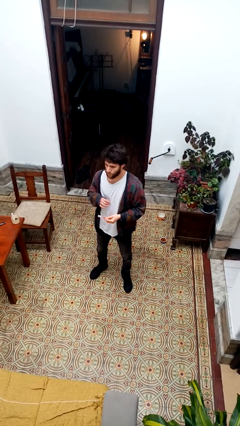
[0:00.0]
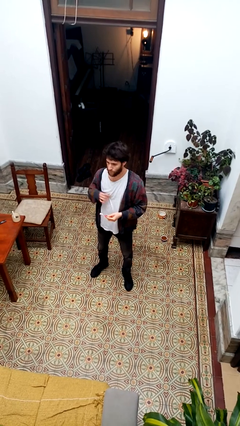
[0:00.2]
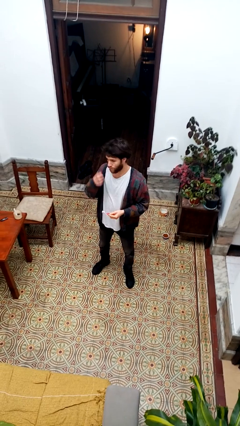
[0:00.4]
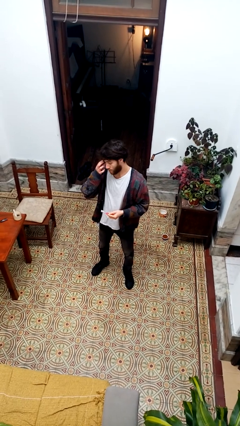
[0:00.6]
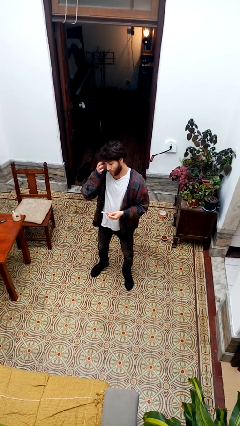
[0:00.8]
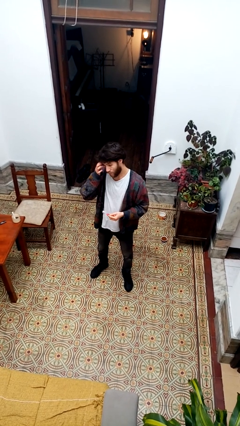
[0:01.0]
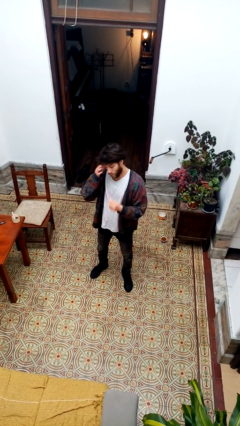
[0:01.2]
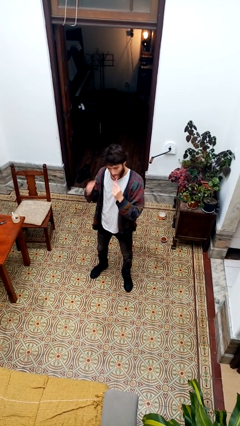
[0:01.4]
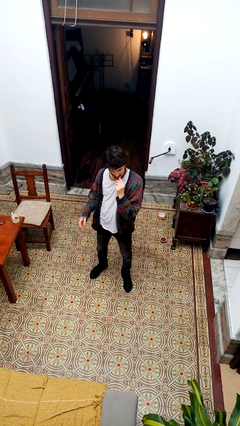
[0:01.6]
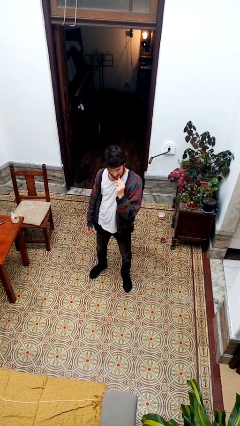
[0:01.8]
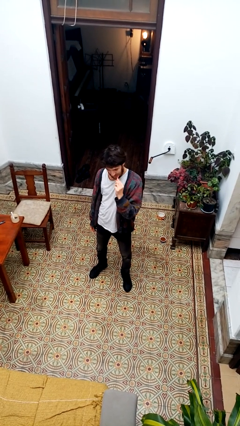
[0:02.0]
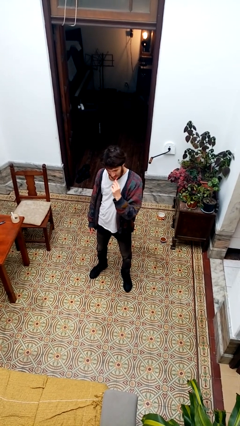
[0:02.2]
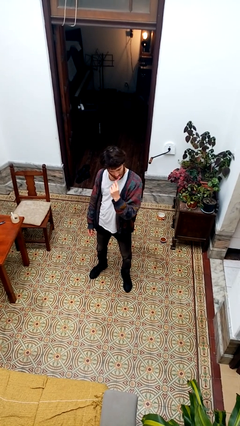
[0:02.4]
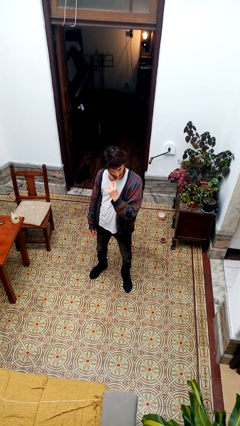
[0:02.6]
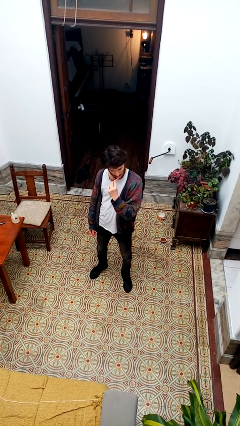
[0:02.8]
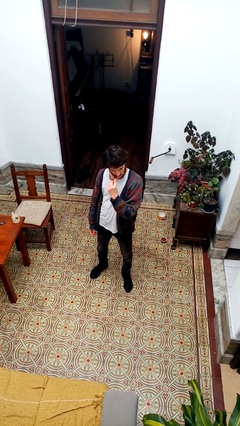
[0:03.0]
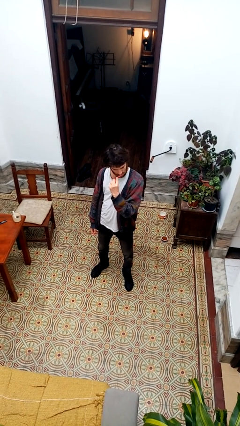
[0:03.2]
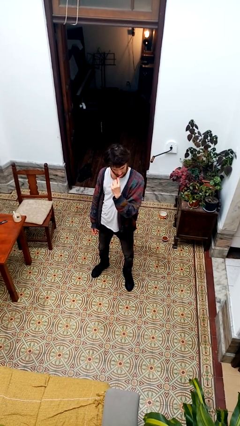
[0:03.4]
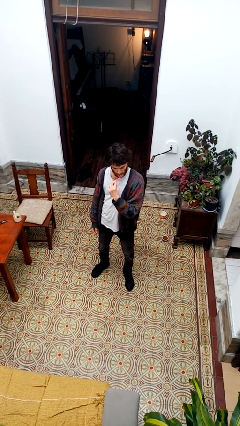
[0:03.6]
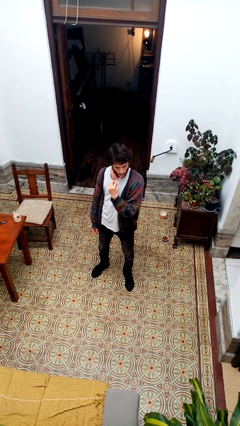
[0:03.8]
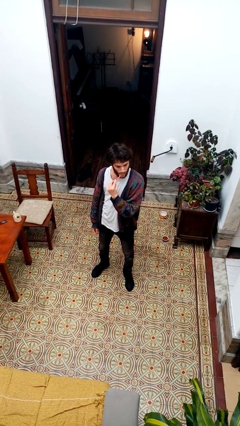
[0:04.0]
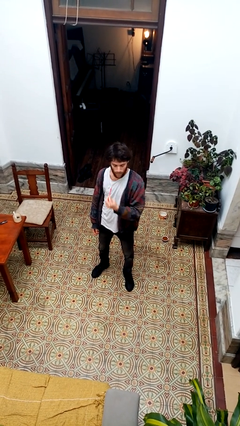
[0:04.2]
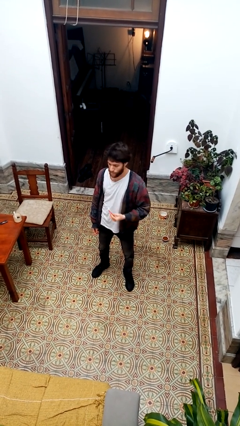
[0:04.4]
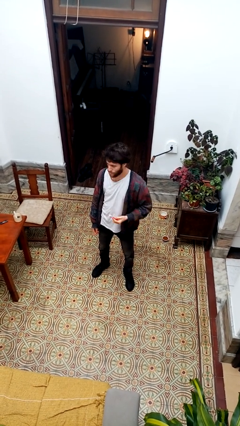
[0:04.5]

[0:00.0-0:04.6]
person brushes teeth

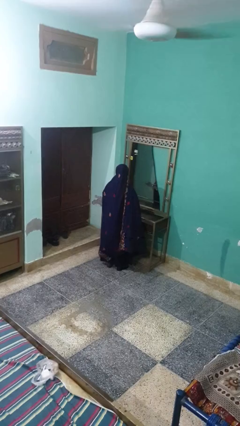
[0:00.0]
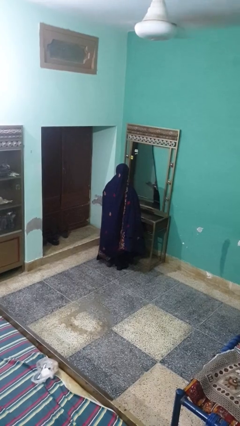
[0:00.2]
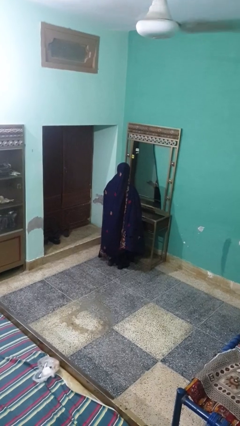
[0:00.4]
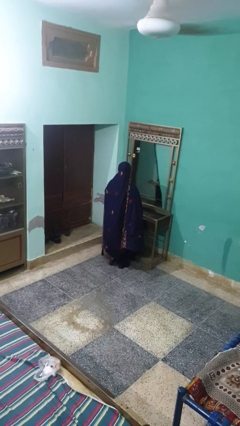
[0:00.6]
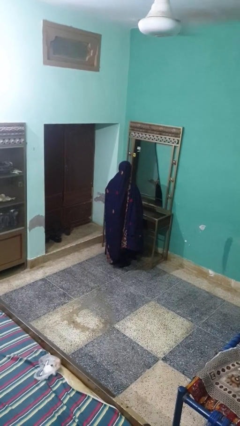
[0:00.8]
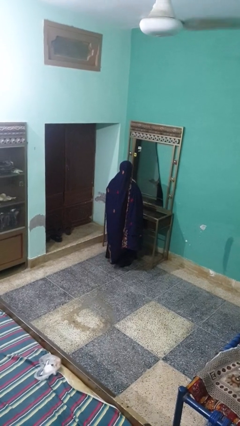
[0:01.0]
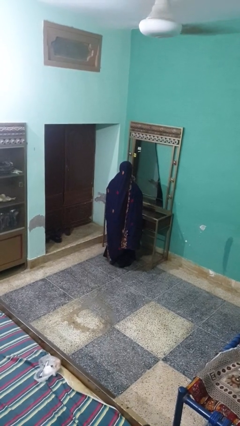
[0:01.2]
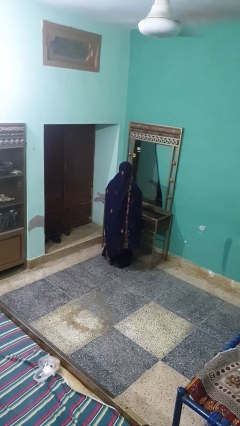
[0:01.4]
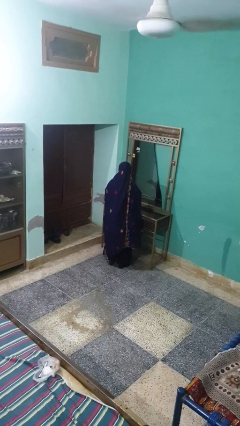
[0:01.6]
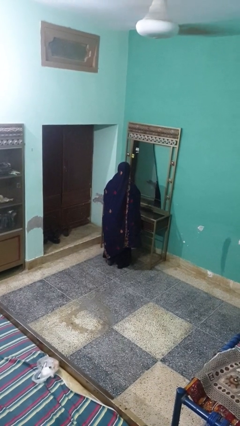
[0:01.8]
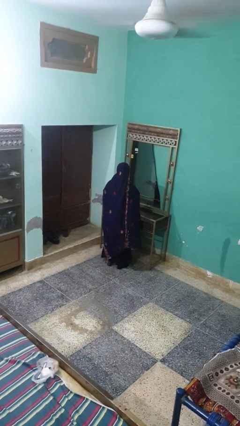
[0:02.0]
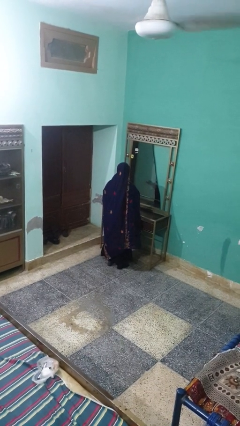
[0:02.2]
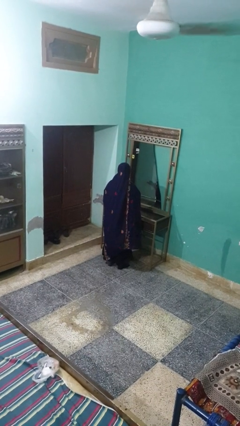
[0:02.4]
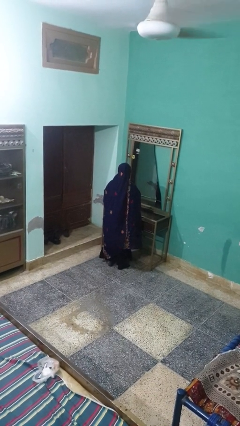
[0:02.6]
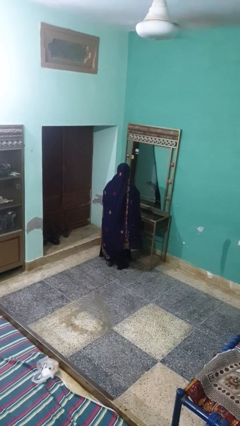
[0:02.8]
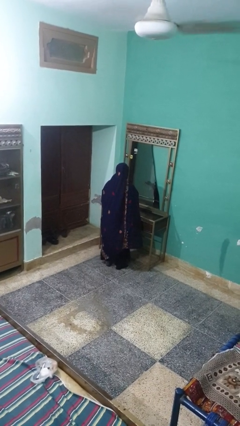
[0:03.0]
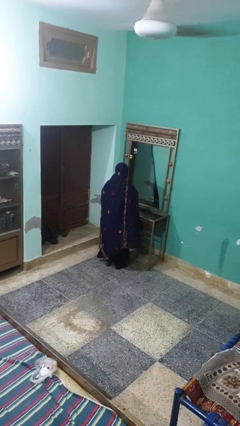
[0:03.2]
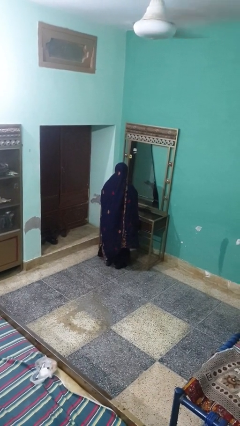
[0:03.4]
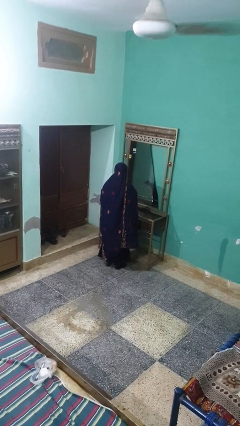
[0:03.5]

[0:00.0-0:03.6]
person applies lip makeup

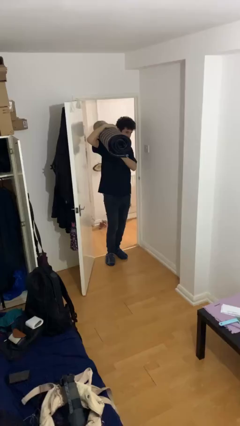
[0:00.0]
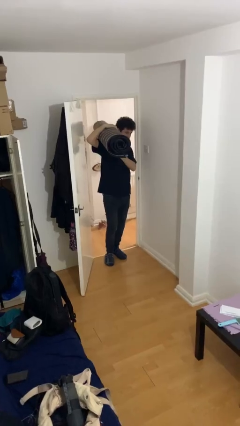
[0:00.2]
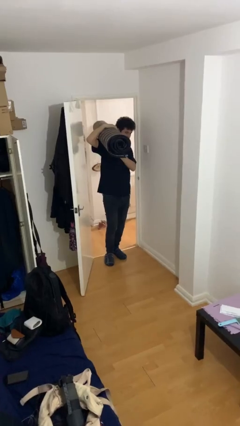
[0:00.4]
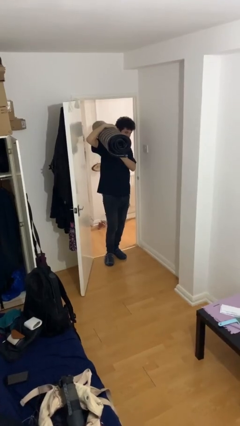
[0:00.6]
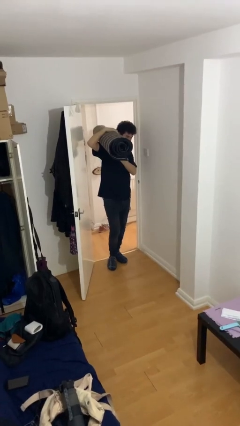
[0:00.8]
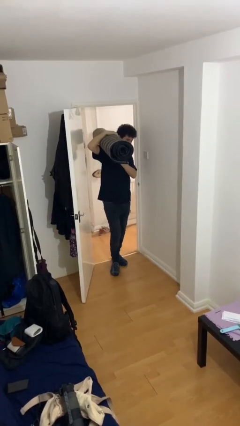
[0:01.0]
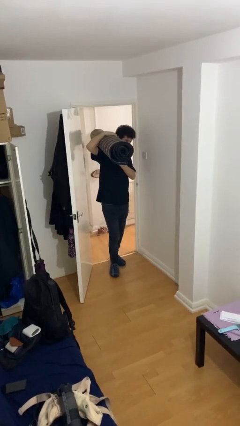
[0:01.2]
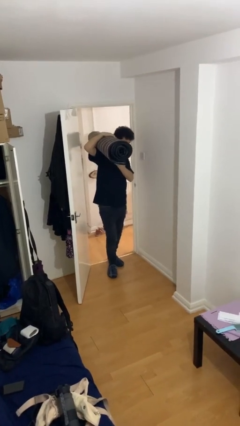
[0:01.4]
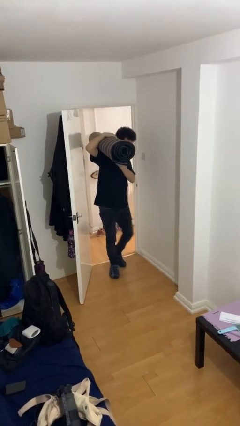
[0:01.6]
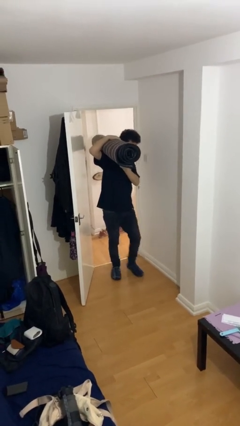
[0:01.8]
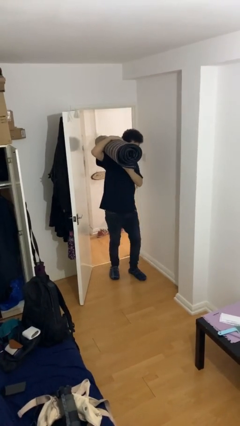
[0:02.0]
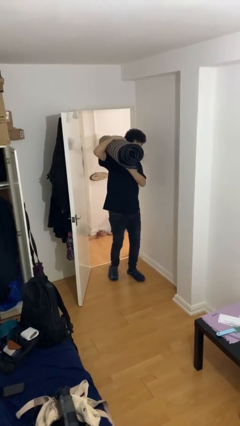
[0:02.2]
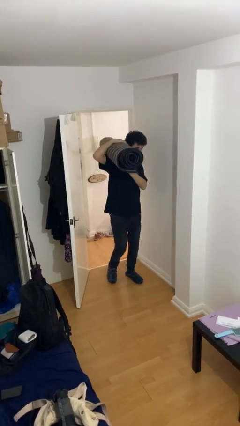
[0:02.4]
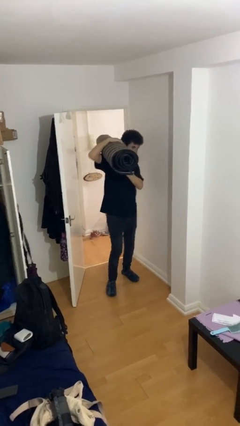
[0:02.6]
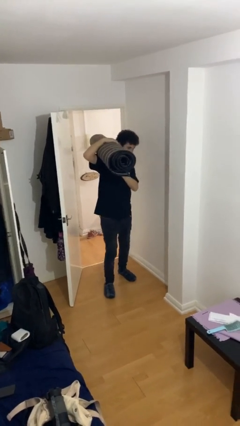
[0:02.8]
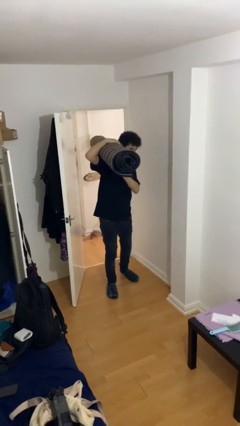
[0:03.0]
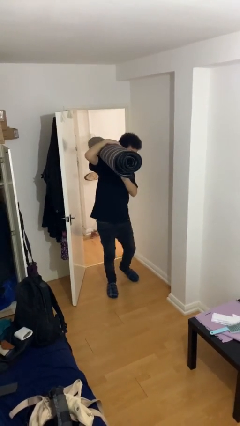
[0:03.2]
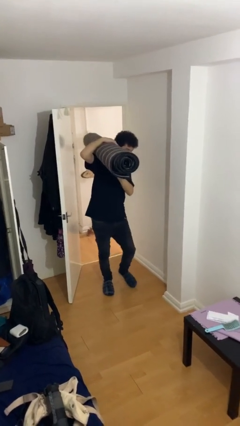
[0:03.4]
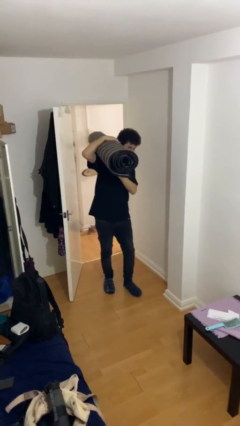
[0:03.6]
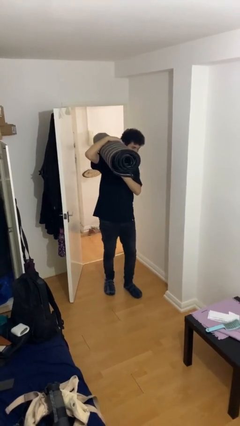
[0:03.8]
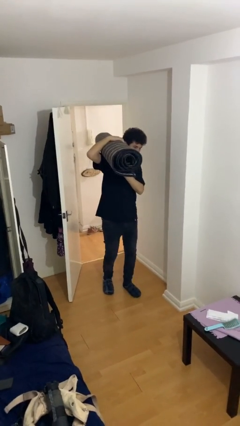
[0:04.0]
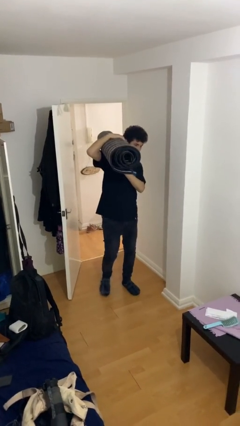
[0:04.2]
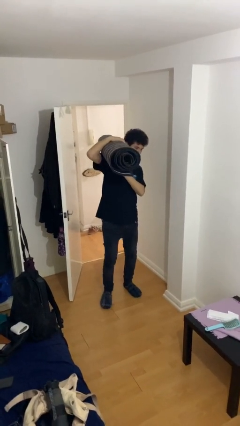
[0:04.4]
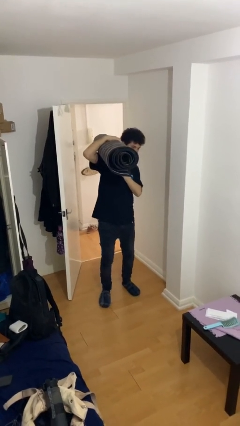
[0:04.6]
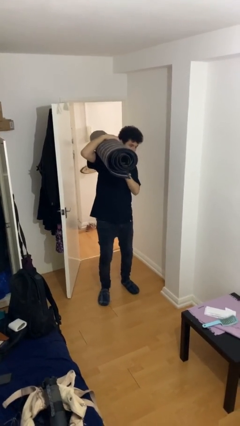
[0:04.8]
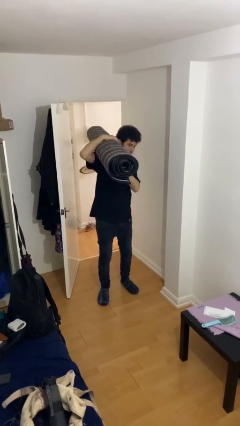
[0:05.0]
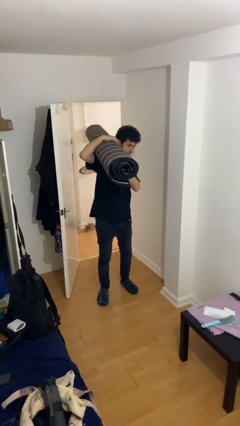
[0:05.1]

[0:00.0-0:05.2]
person carries heavy object

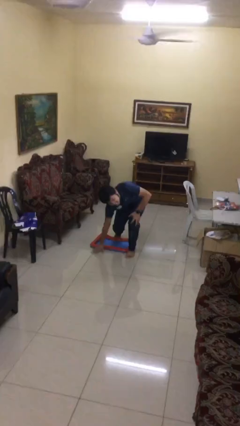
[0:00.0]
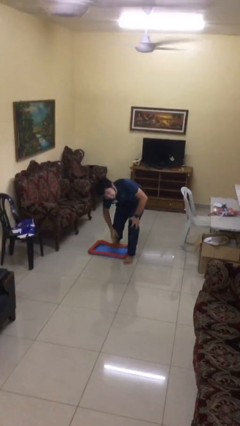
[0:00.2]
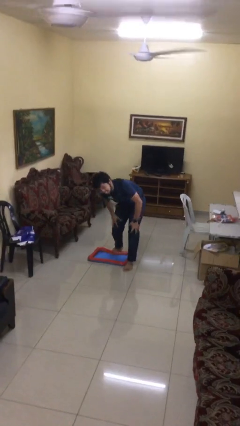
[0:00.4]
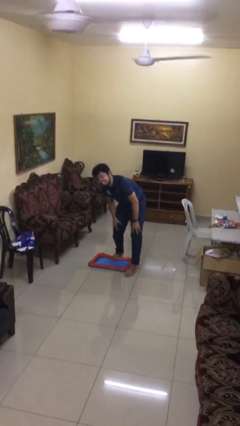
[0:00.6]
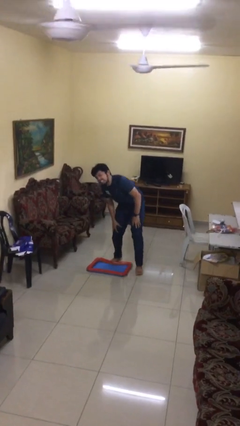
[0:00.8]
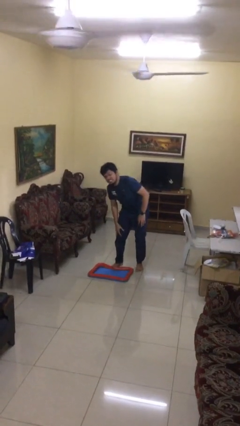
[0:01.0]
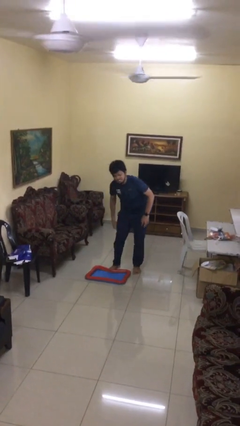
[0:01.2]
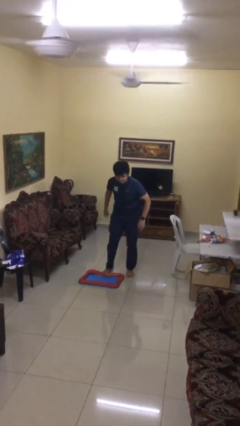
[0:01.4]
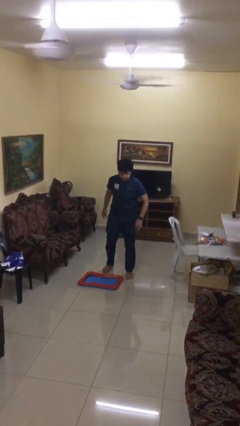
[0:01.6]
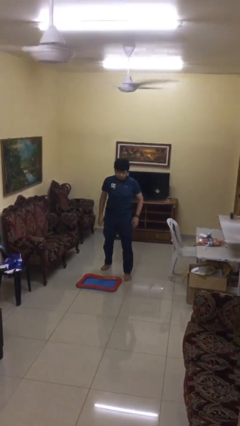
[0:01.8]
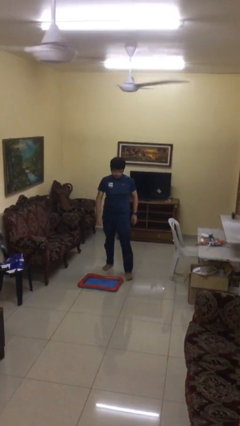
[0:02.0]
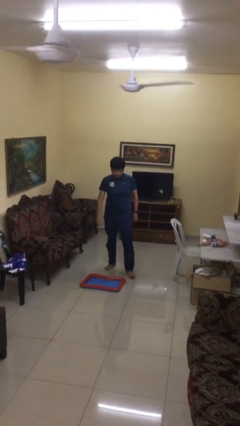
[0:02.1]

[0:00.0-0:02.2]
person stands up from floor

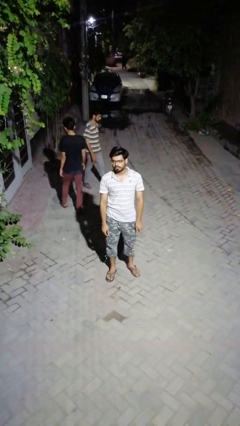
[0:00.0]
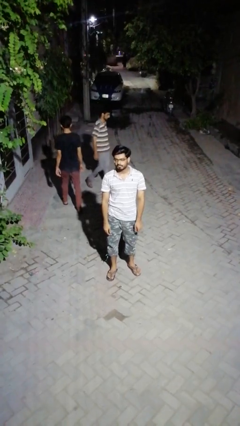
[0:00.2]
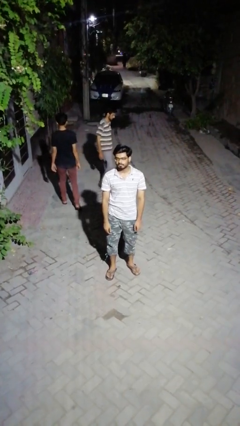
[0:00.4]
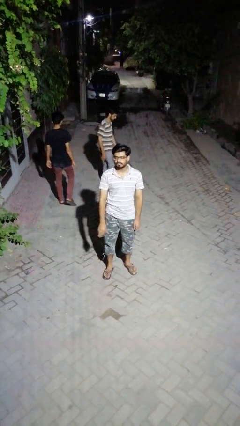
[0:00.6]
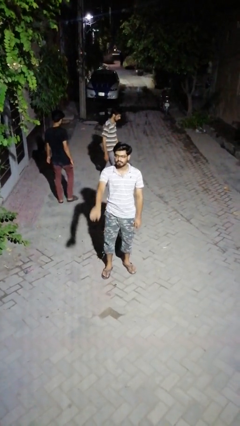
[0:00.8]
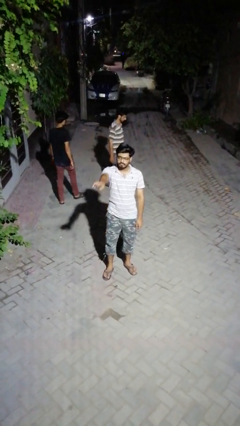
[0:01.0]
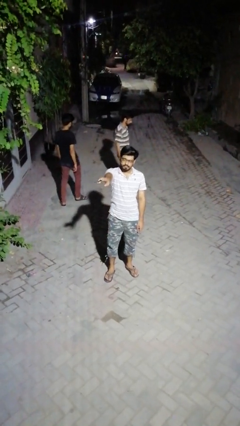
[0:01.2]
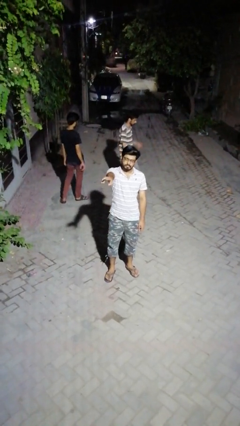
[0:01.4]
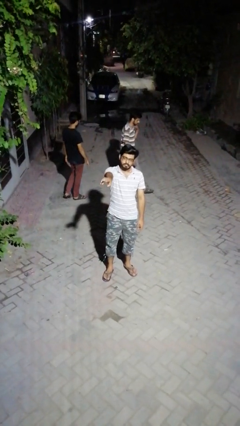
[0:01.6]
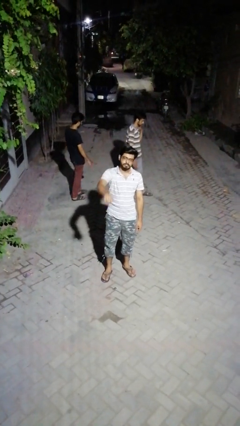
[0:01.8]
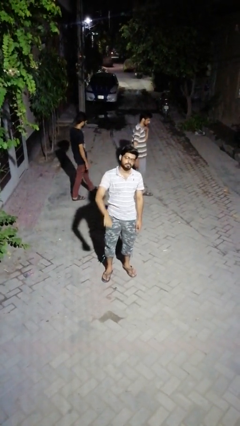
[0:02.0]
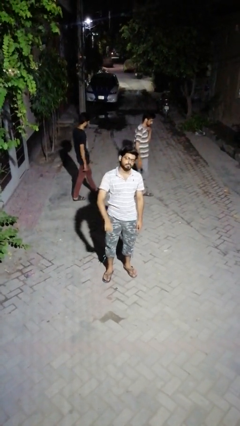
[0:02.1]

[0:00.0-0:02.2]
person points at person
